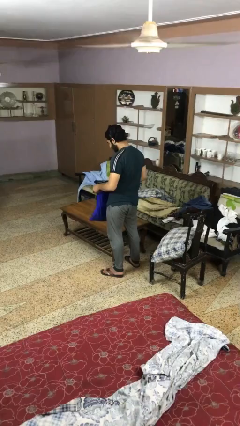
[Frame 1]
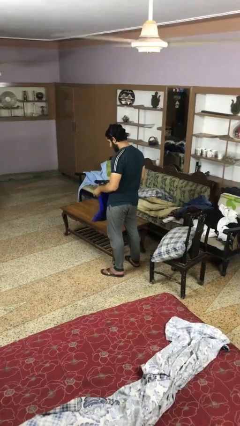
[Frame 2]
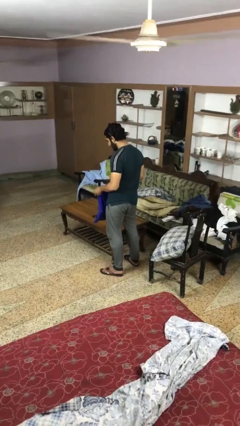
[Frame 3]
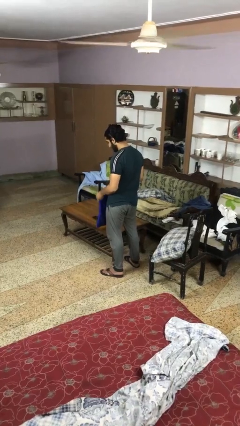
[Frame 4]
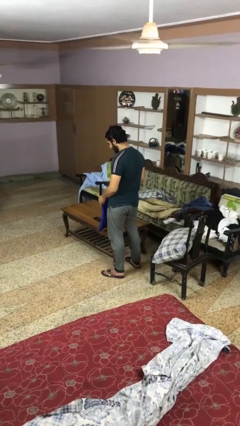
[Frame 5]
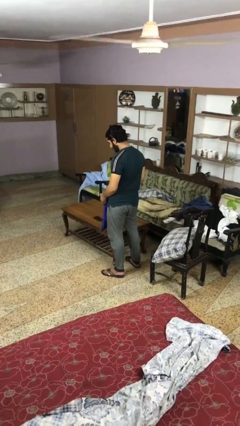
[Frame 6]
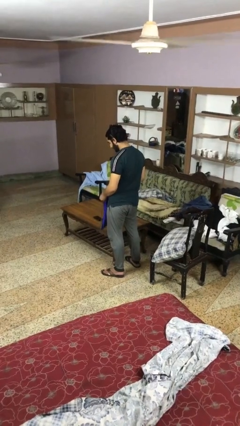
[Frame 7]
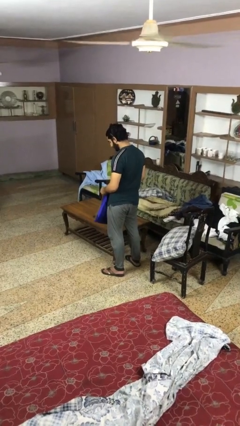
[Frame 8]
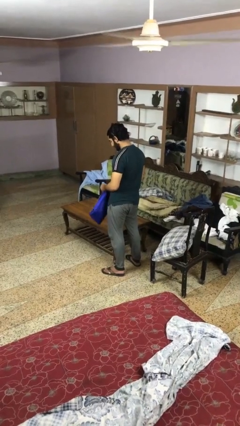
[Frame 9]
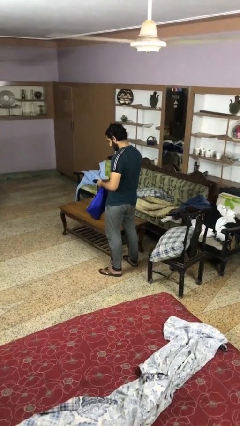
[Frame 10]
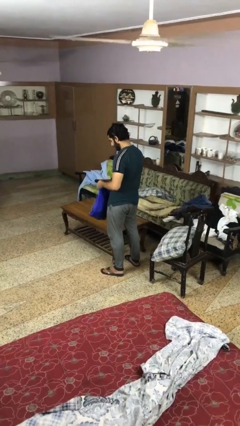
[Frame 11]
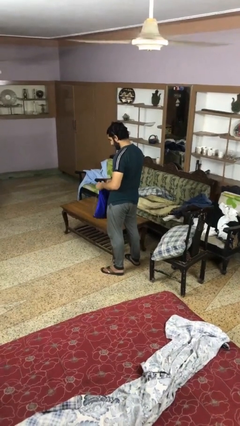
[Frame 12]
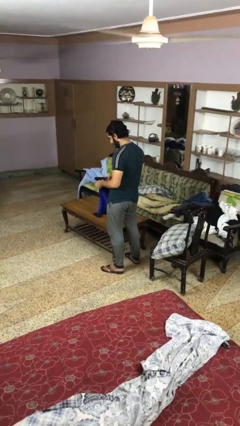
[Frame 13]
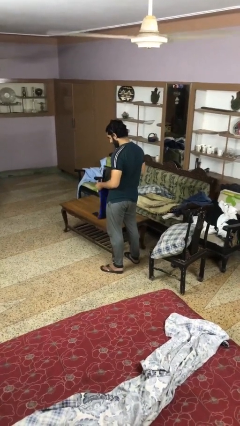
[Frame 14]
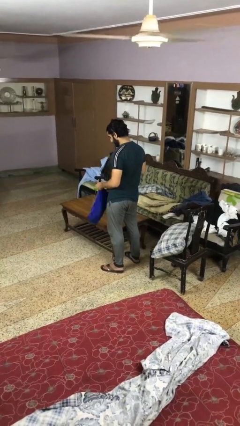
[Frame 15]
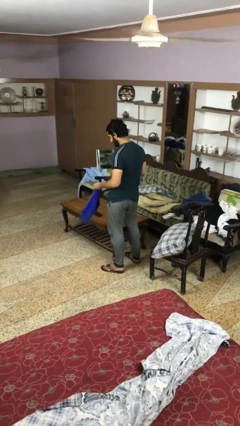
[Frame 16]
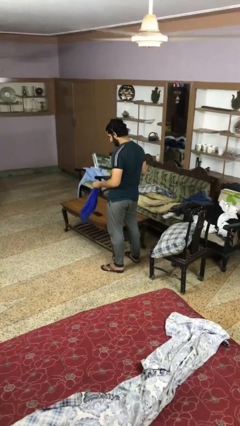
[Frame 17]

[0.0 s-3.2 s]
person takes object from bag

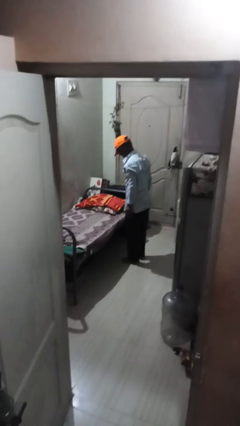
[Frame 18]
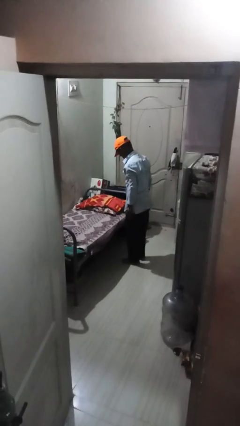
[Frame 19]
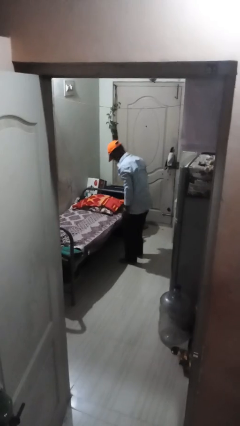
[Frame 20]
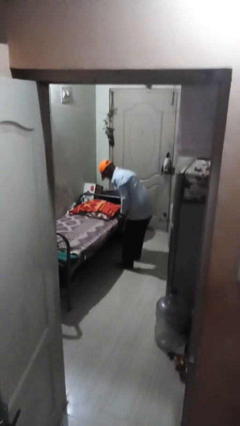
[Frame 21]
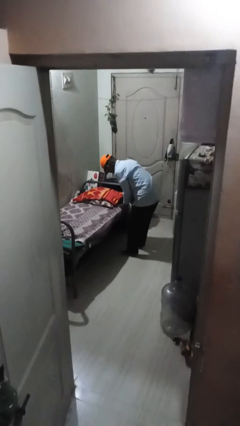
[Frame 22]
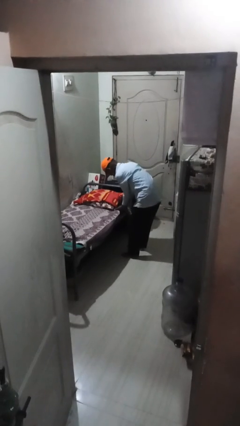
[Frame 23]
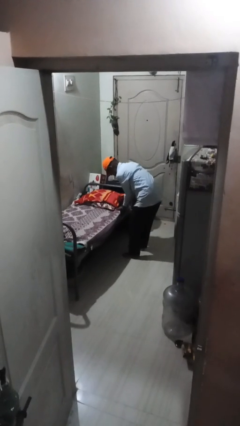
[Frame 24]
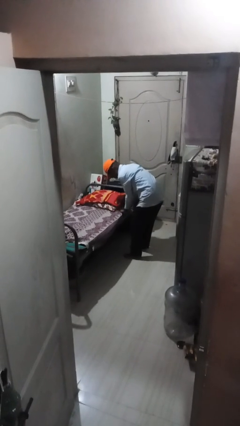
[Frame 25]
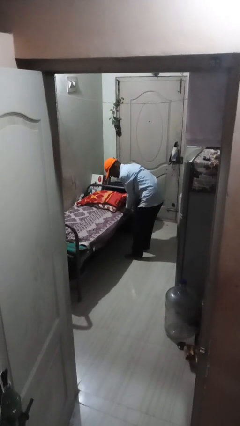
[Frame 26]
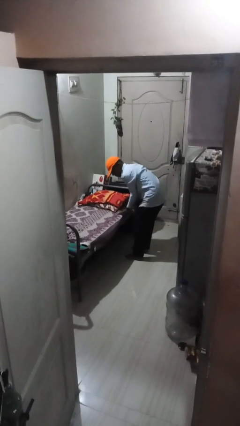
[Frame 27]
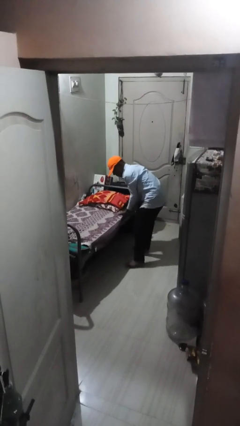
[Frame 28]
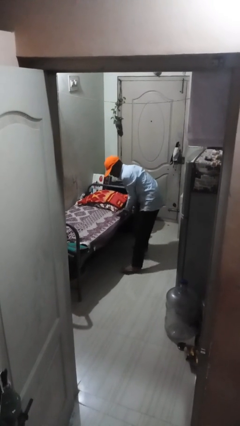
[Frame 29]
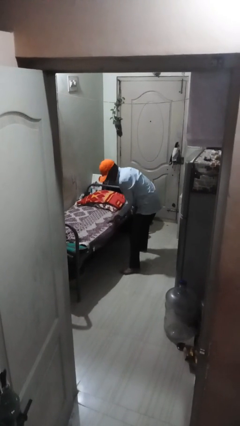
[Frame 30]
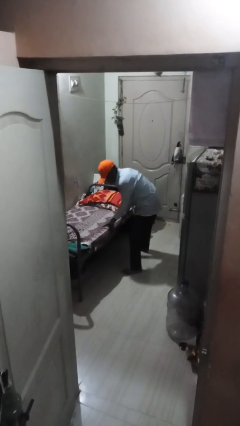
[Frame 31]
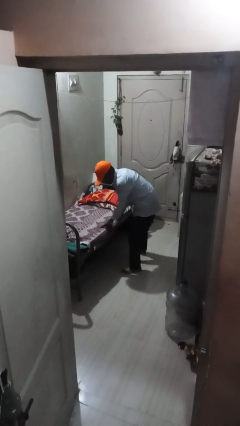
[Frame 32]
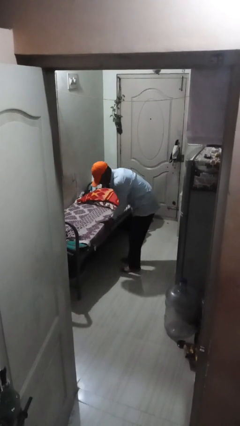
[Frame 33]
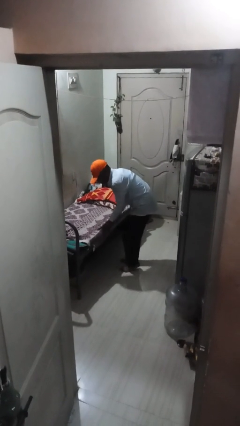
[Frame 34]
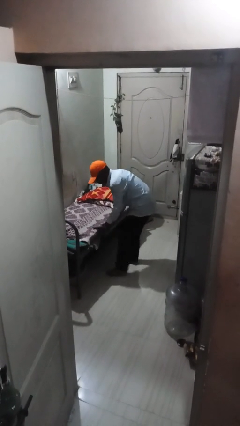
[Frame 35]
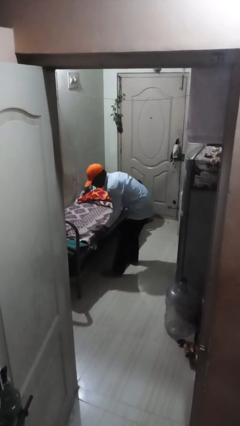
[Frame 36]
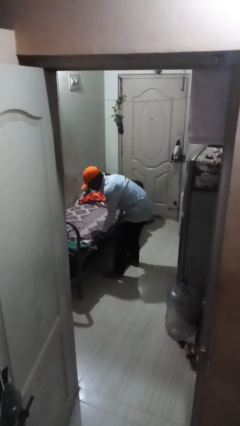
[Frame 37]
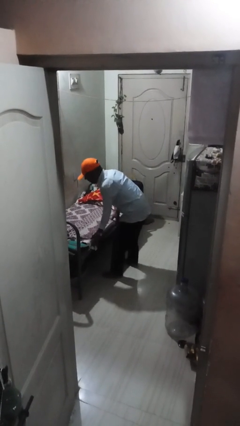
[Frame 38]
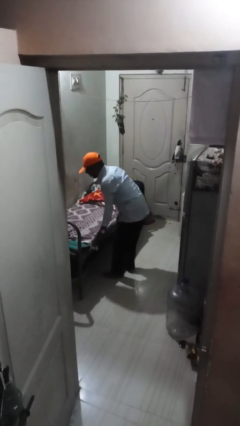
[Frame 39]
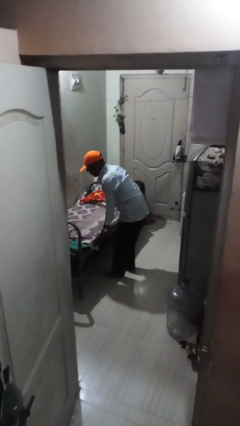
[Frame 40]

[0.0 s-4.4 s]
person makes bed

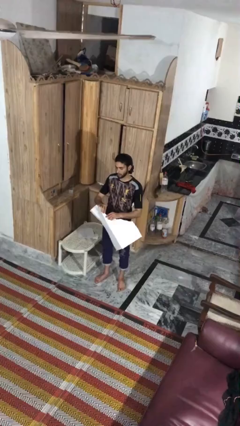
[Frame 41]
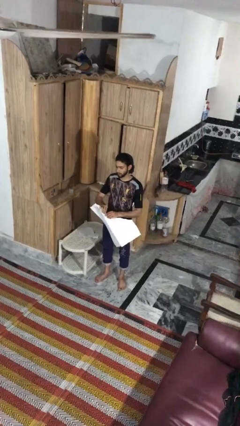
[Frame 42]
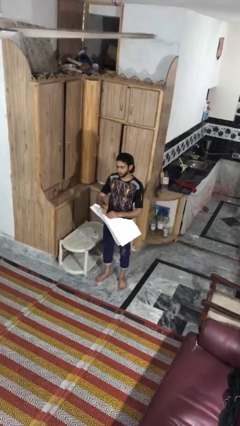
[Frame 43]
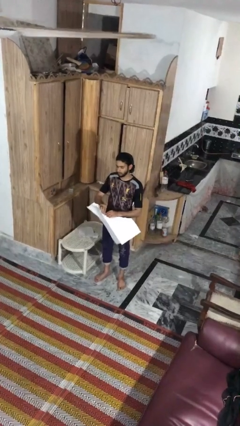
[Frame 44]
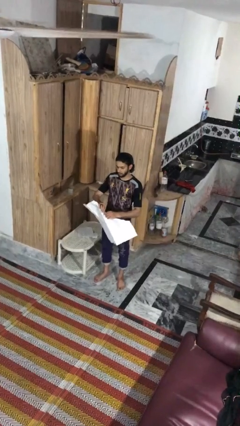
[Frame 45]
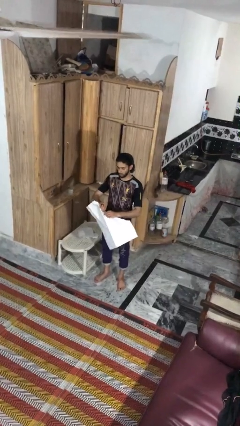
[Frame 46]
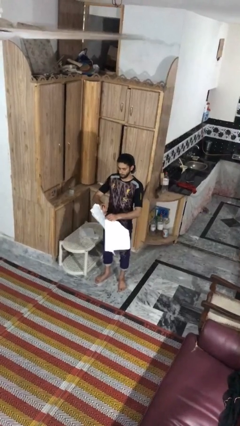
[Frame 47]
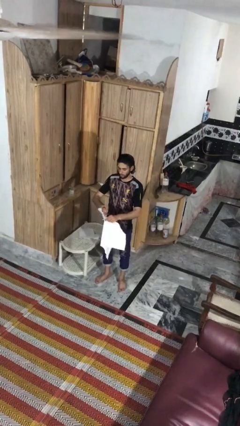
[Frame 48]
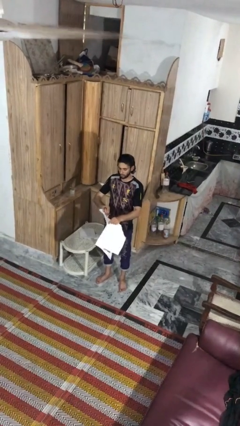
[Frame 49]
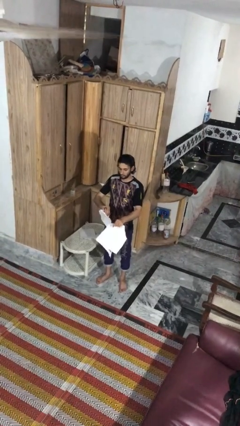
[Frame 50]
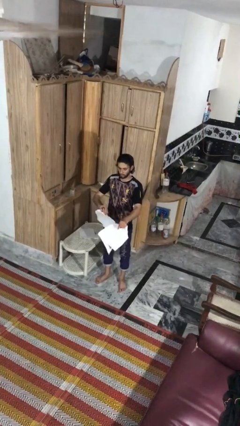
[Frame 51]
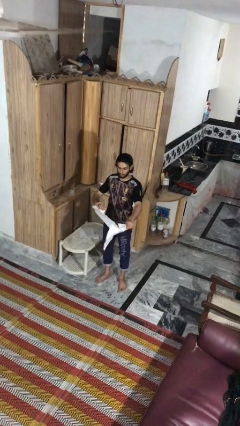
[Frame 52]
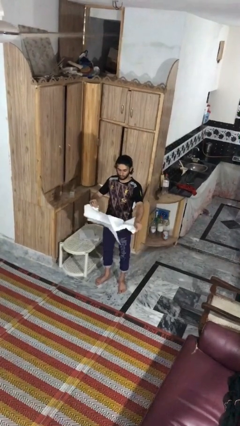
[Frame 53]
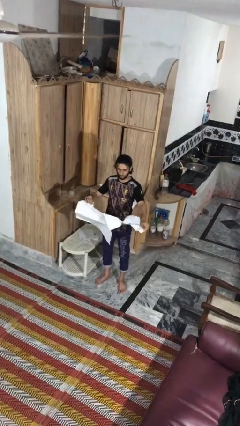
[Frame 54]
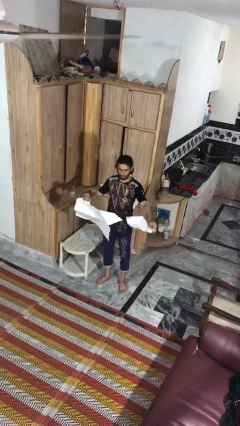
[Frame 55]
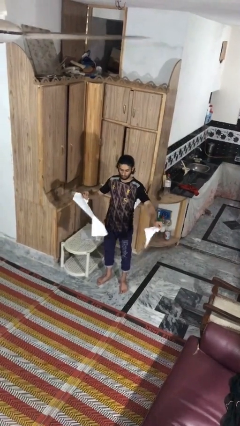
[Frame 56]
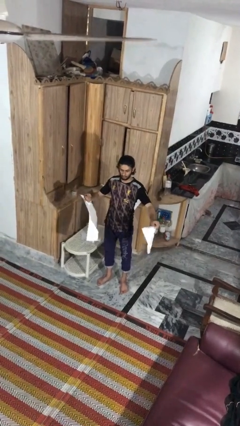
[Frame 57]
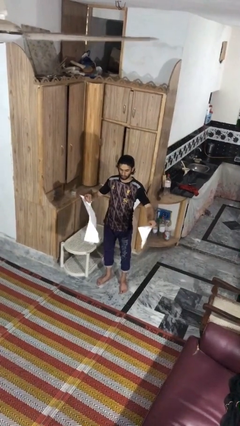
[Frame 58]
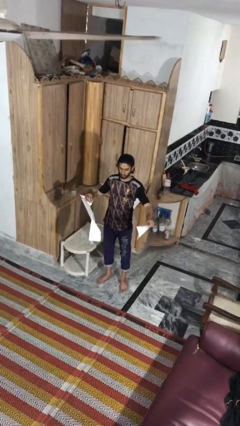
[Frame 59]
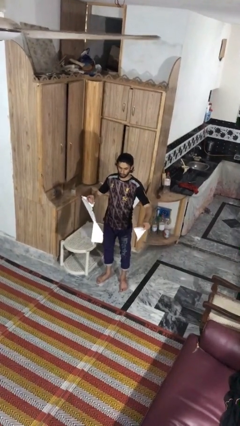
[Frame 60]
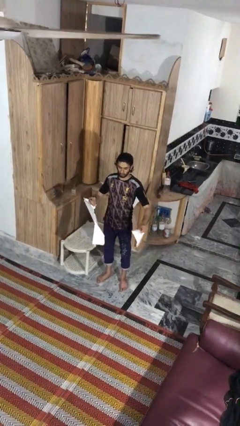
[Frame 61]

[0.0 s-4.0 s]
person tears paper

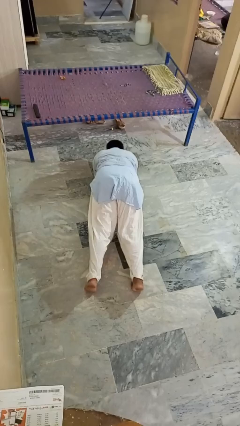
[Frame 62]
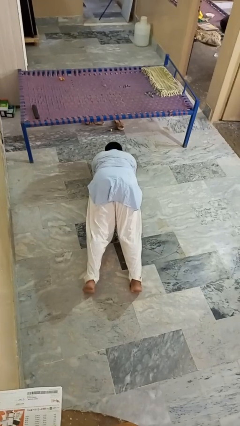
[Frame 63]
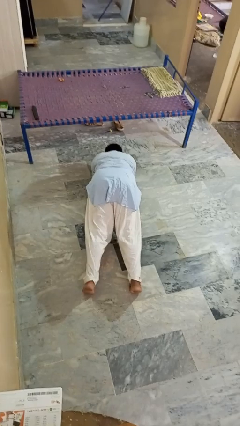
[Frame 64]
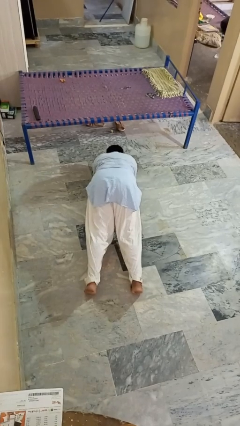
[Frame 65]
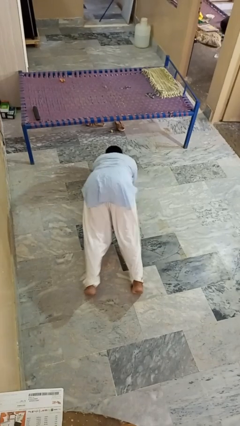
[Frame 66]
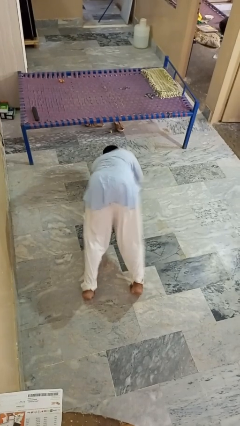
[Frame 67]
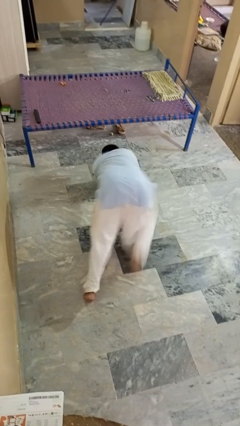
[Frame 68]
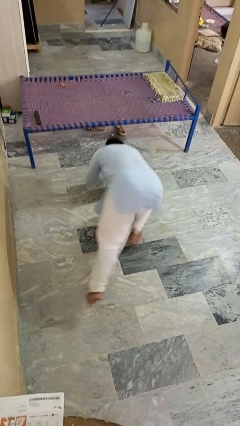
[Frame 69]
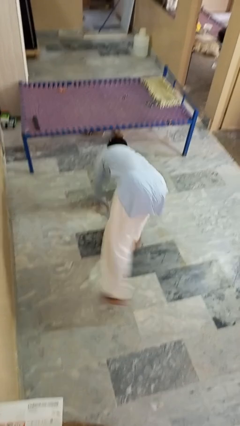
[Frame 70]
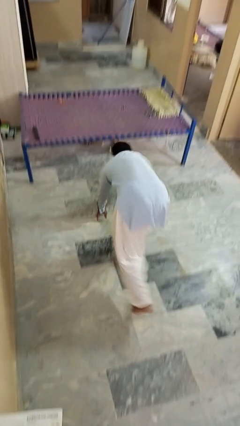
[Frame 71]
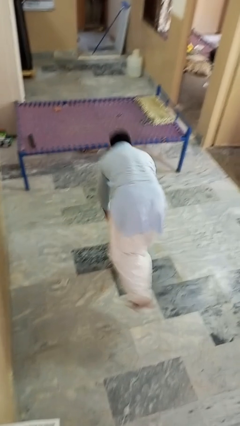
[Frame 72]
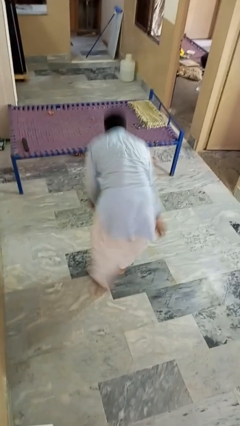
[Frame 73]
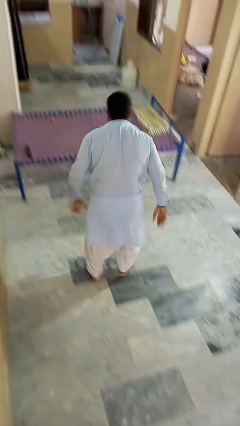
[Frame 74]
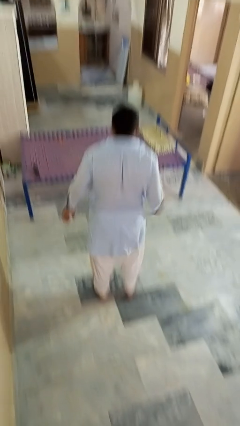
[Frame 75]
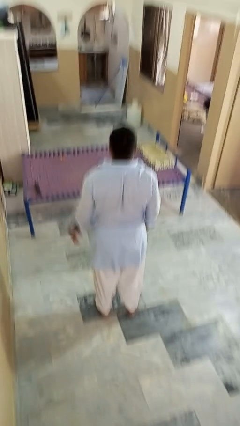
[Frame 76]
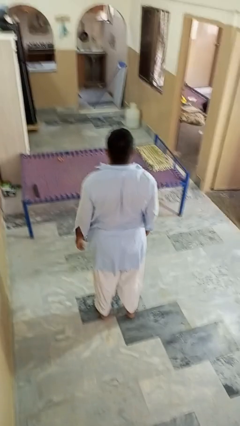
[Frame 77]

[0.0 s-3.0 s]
person stands up from floor

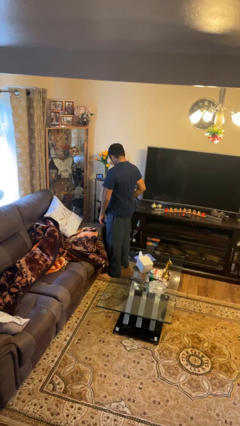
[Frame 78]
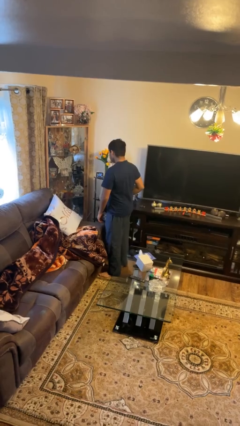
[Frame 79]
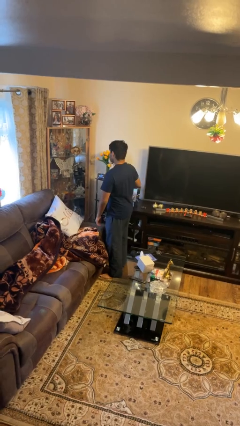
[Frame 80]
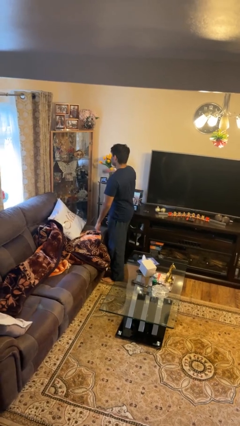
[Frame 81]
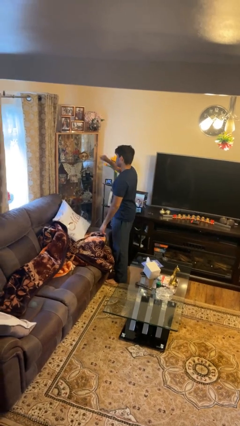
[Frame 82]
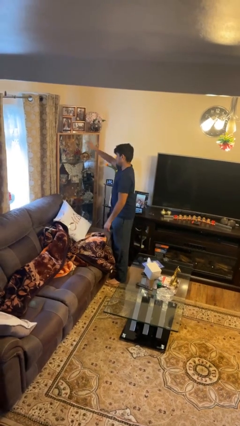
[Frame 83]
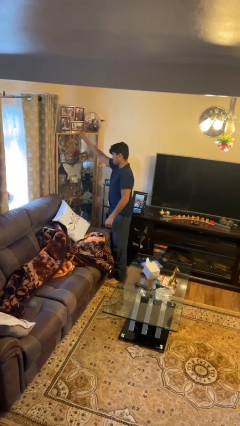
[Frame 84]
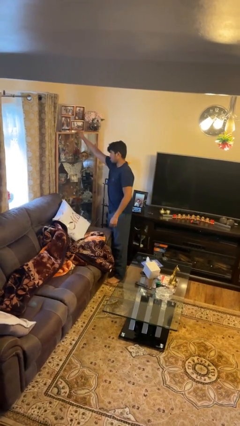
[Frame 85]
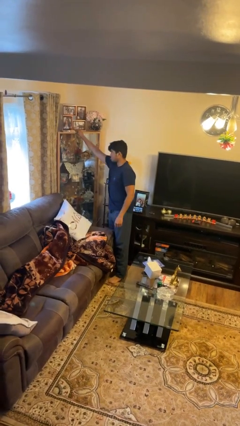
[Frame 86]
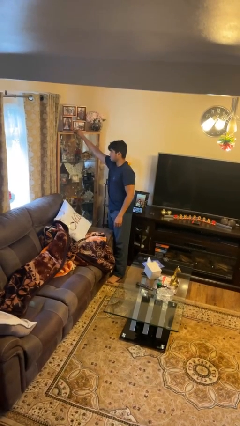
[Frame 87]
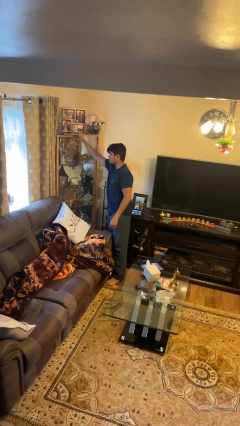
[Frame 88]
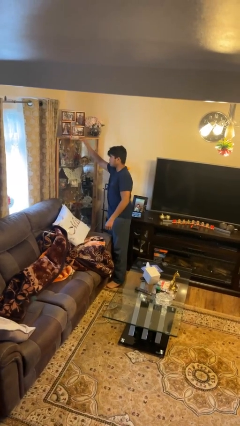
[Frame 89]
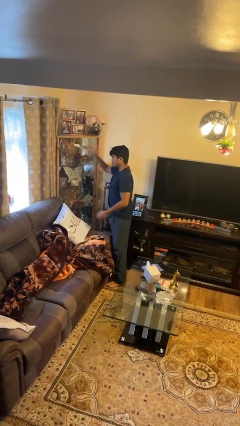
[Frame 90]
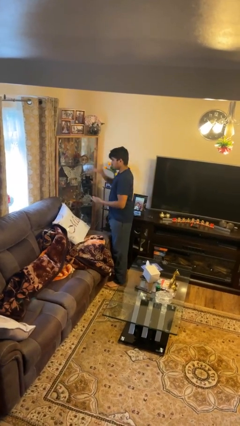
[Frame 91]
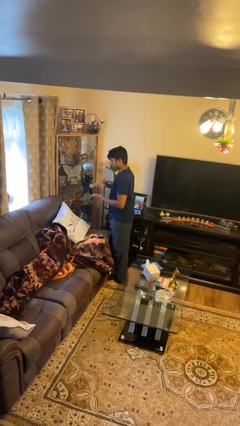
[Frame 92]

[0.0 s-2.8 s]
person picks up object from shelf

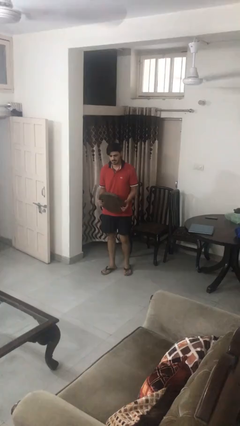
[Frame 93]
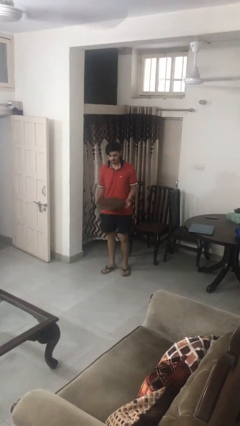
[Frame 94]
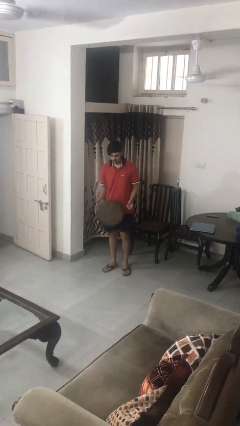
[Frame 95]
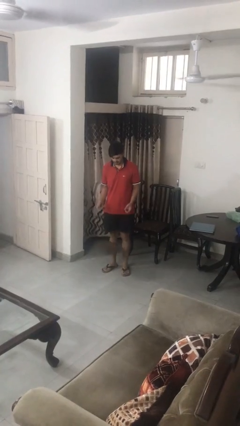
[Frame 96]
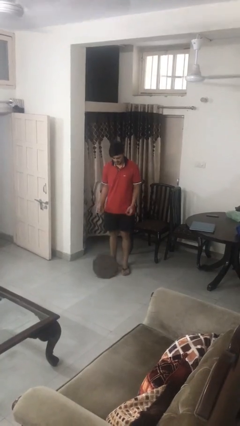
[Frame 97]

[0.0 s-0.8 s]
person drops object
